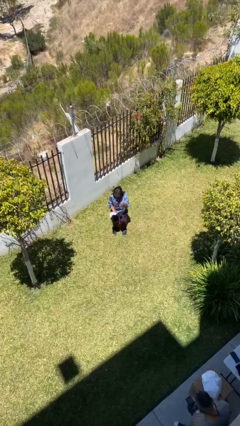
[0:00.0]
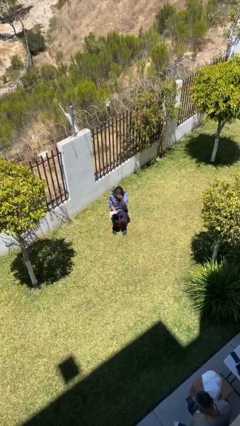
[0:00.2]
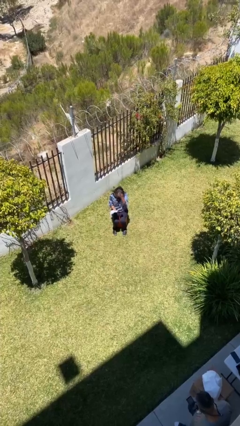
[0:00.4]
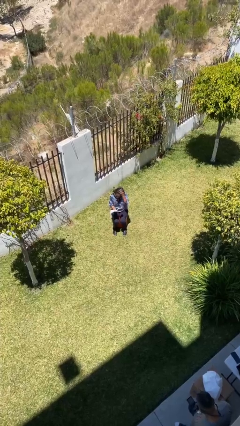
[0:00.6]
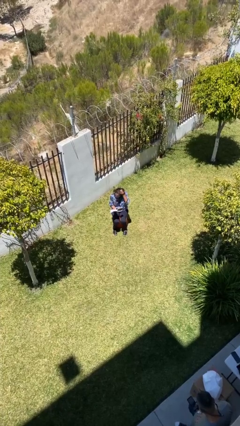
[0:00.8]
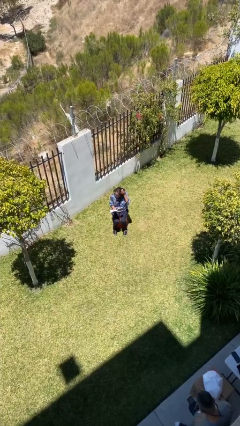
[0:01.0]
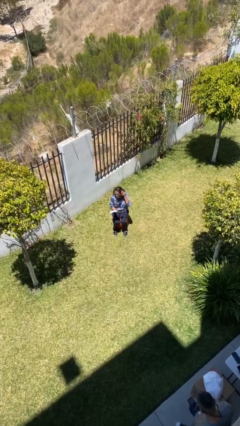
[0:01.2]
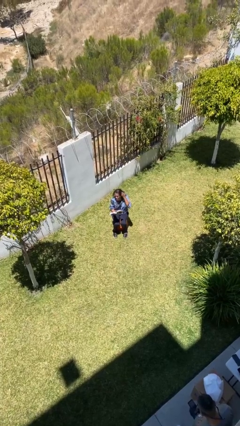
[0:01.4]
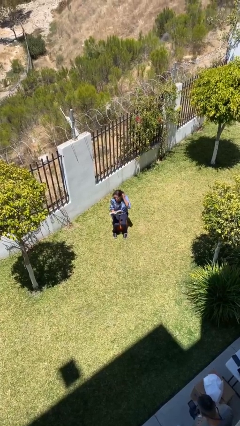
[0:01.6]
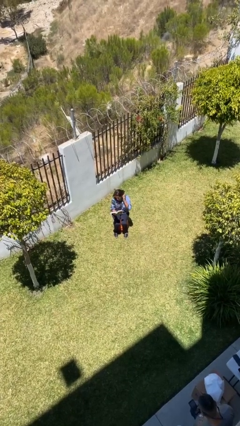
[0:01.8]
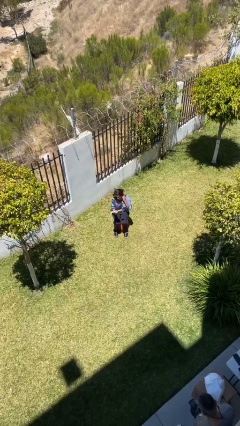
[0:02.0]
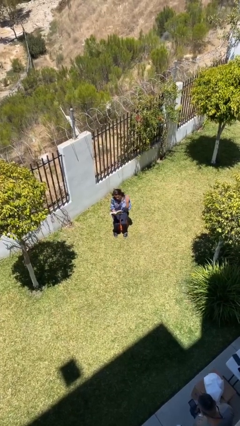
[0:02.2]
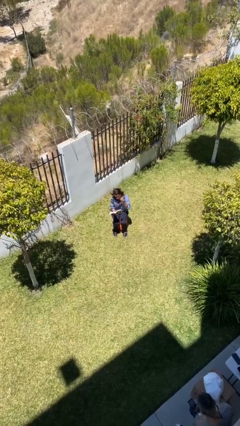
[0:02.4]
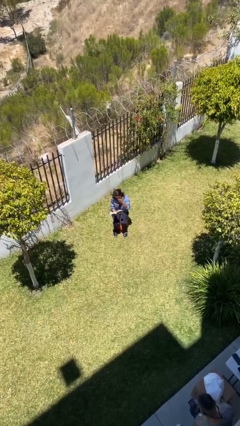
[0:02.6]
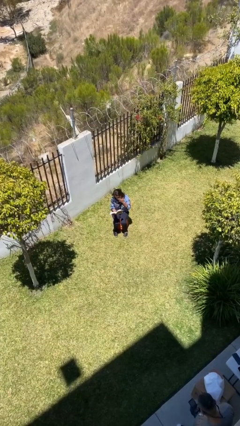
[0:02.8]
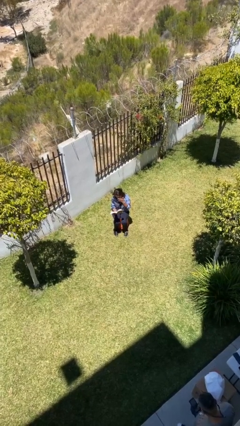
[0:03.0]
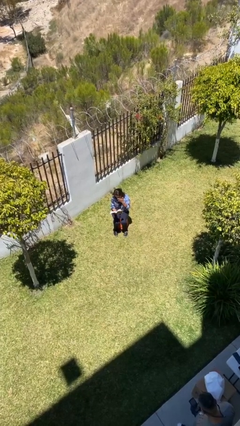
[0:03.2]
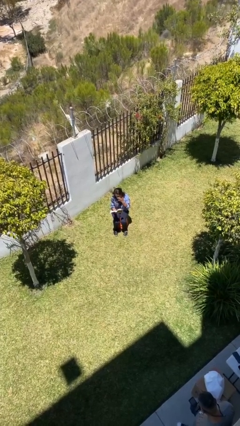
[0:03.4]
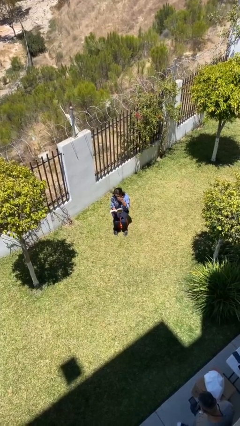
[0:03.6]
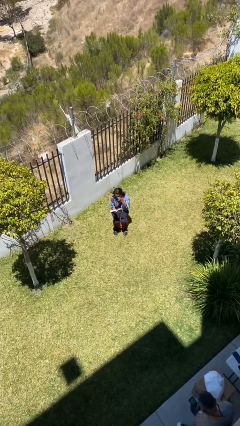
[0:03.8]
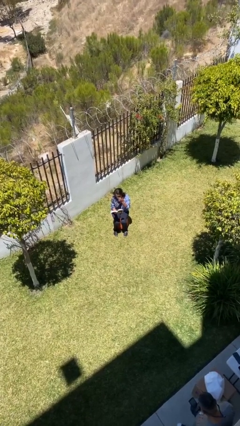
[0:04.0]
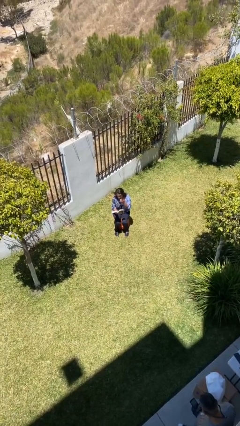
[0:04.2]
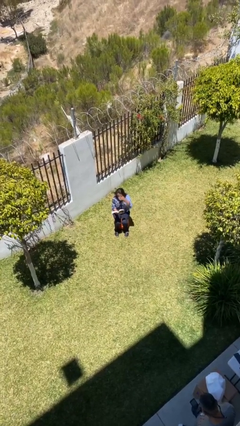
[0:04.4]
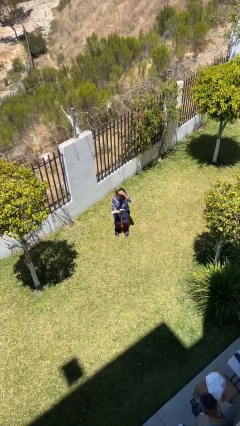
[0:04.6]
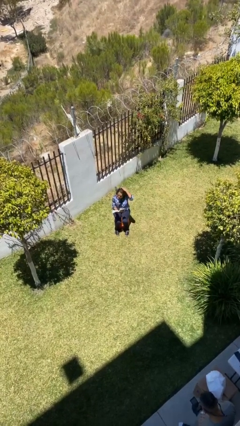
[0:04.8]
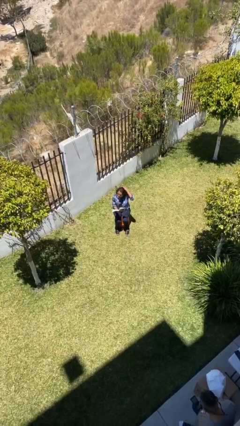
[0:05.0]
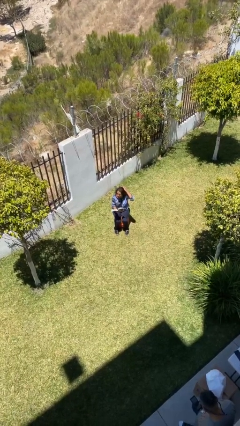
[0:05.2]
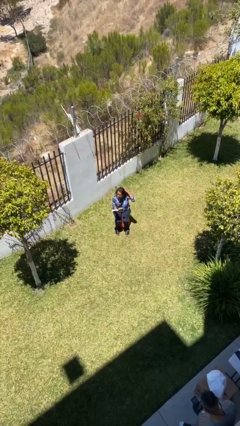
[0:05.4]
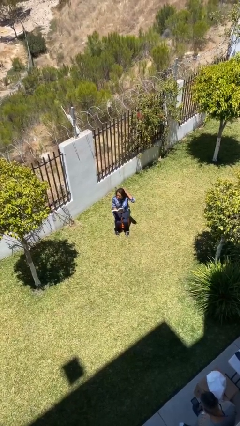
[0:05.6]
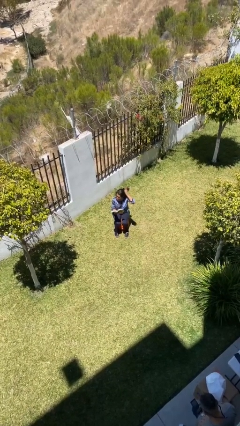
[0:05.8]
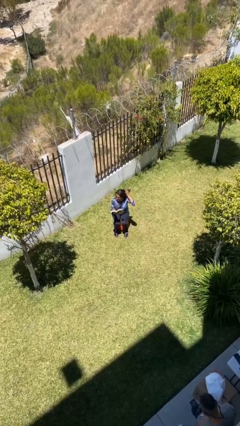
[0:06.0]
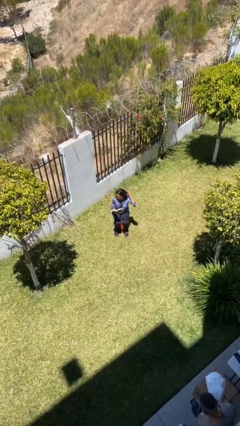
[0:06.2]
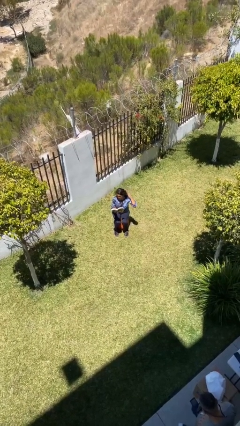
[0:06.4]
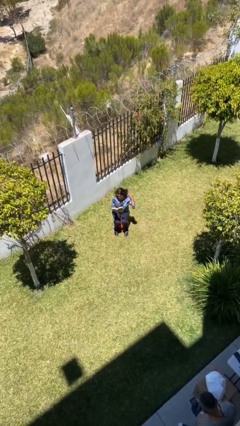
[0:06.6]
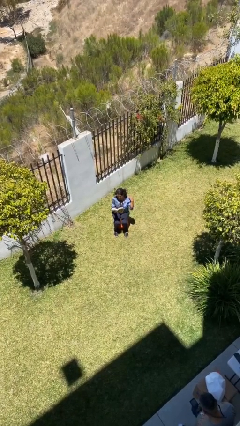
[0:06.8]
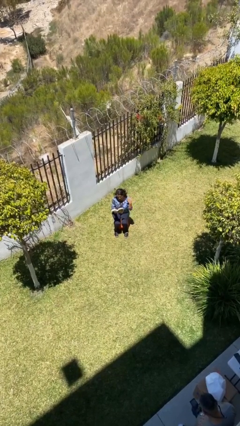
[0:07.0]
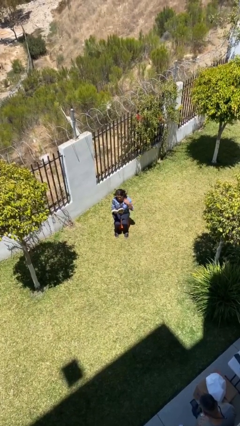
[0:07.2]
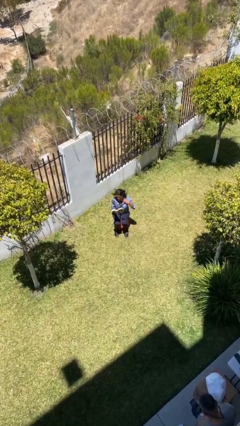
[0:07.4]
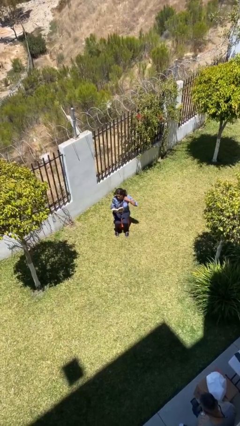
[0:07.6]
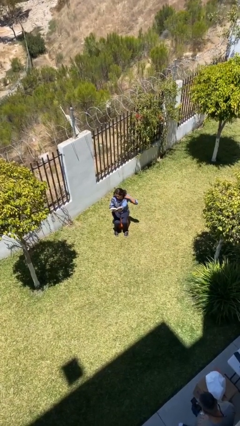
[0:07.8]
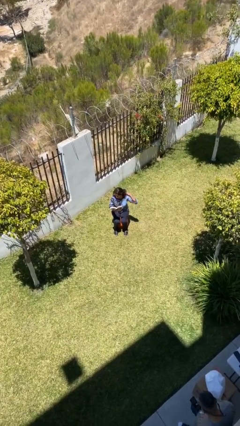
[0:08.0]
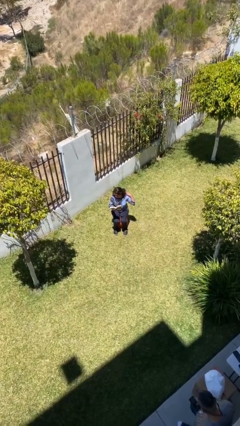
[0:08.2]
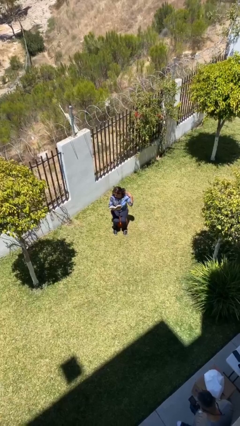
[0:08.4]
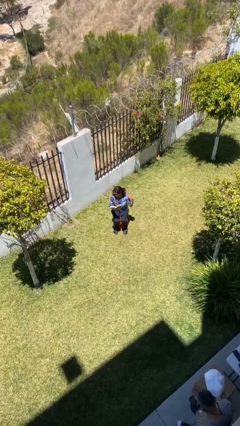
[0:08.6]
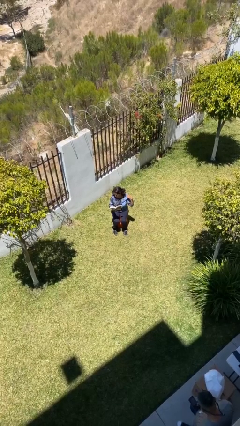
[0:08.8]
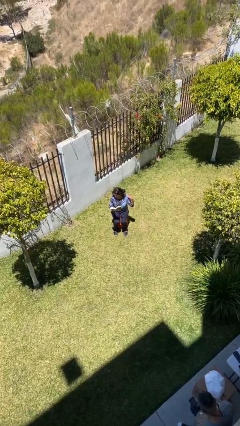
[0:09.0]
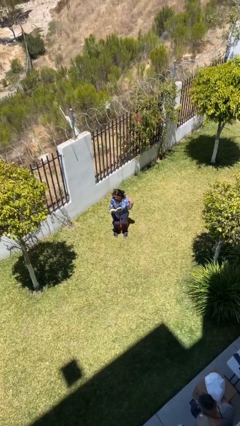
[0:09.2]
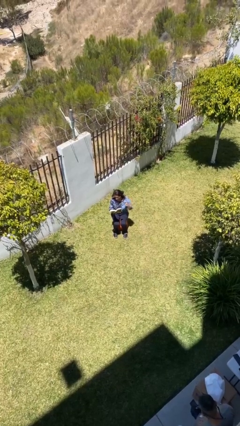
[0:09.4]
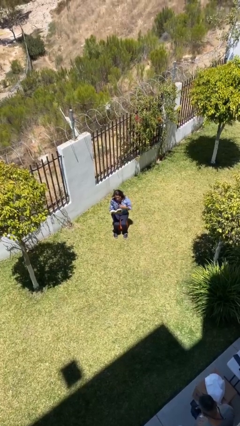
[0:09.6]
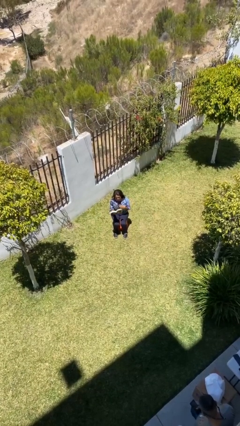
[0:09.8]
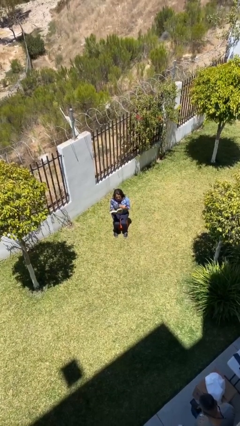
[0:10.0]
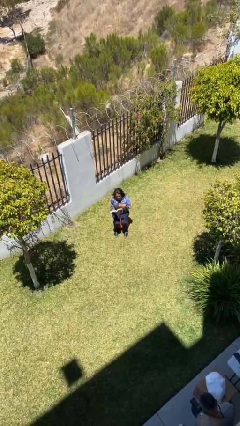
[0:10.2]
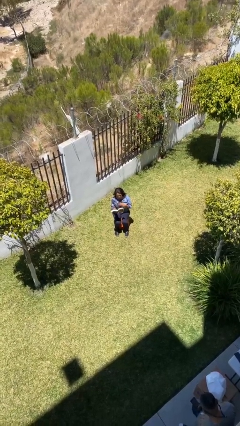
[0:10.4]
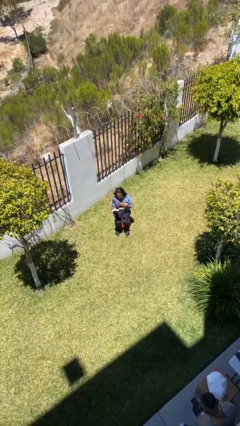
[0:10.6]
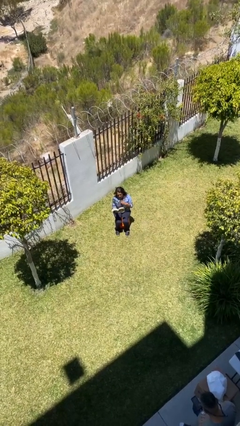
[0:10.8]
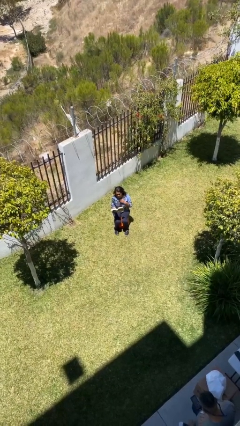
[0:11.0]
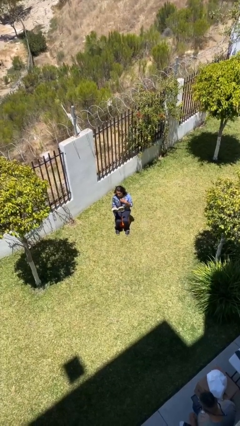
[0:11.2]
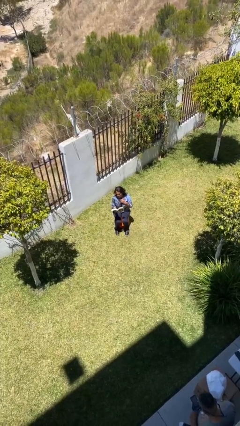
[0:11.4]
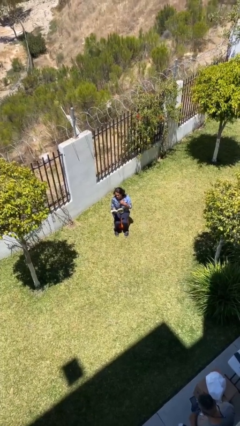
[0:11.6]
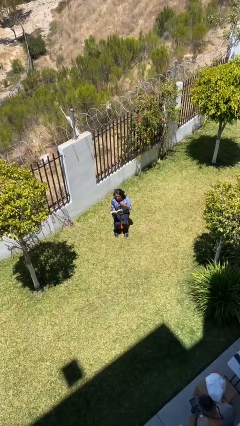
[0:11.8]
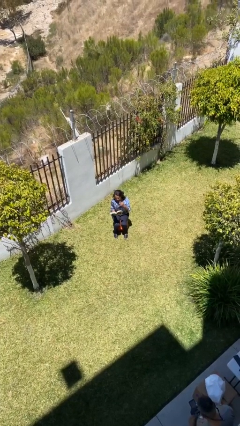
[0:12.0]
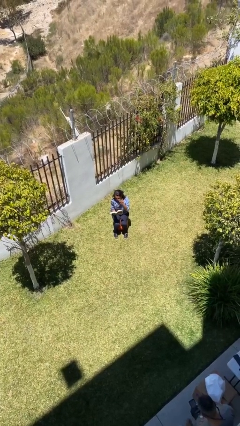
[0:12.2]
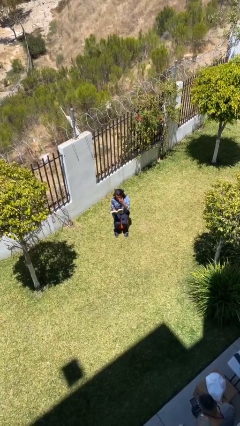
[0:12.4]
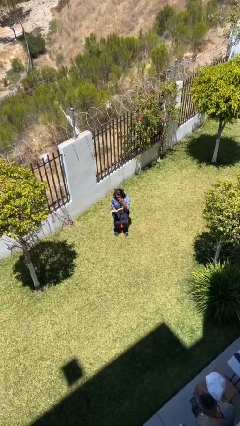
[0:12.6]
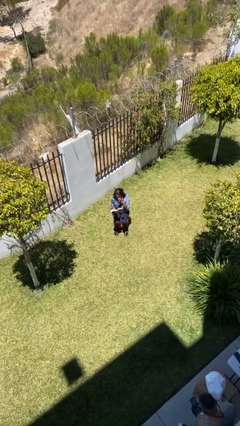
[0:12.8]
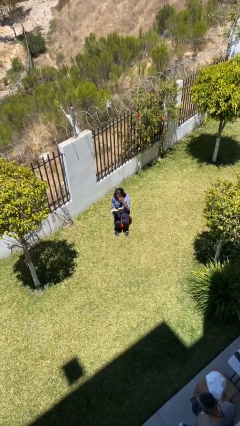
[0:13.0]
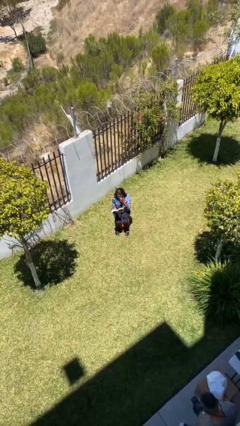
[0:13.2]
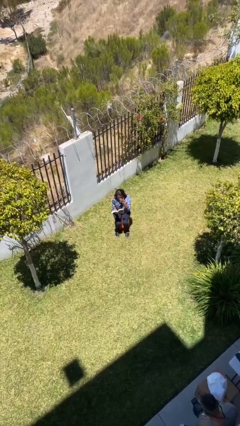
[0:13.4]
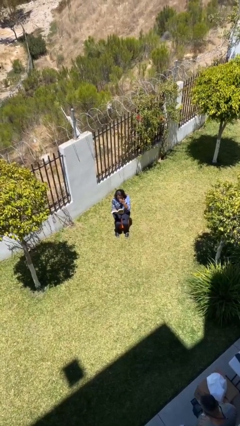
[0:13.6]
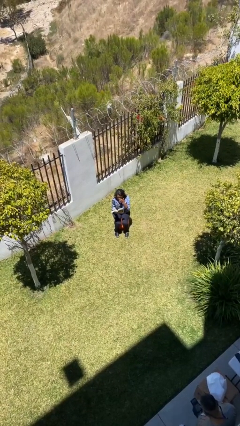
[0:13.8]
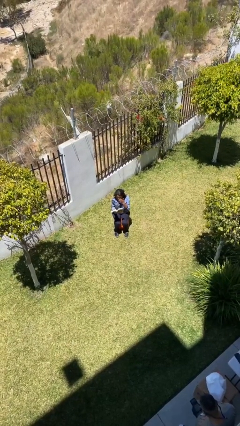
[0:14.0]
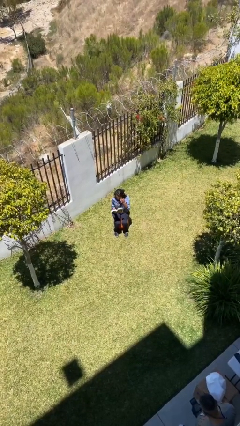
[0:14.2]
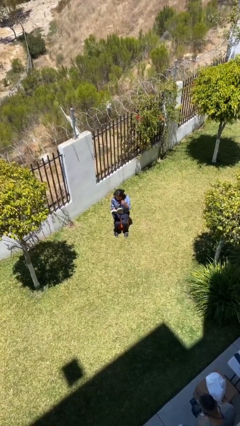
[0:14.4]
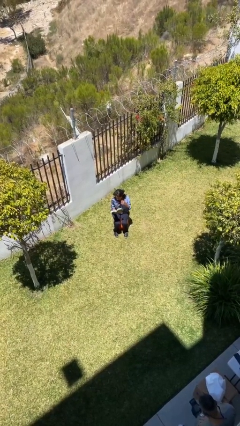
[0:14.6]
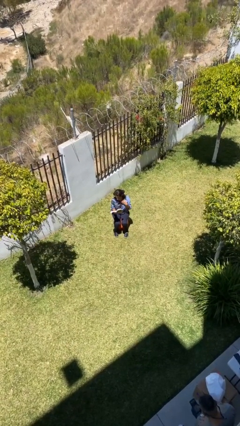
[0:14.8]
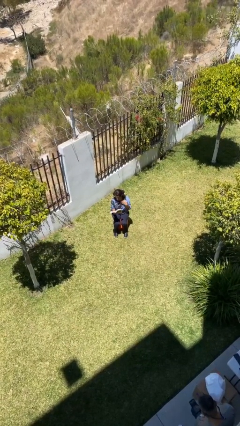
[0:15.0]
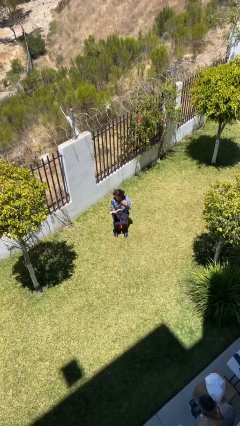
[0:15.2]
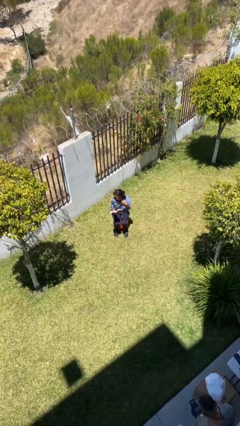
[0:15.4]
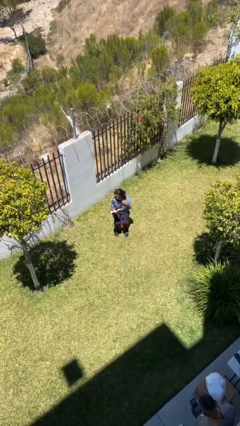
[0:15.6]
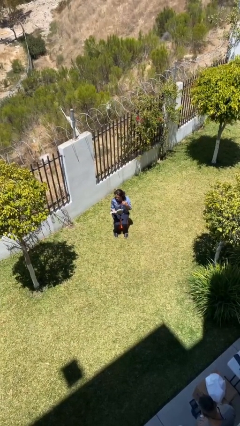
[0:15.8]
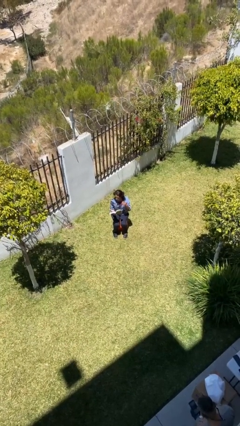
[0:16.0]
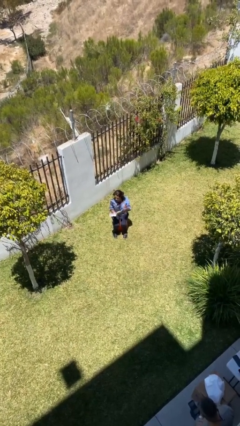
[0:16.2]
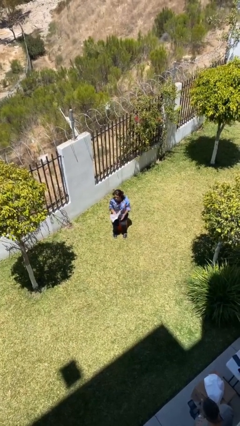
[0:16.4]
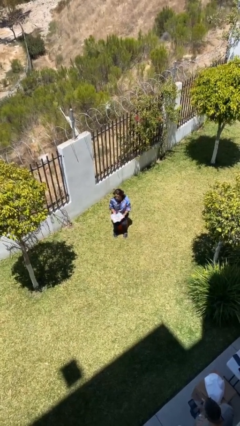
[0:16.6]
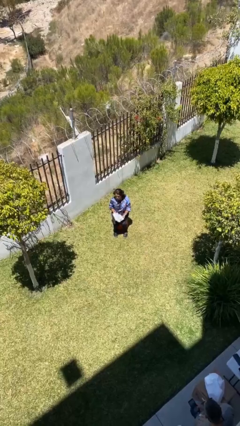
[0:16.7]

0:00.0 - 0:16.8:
person reads document

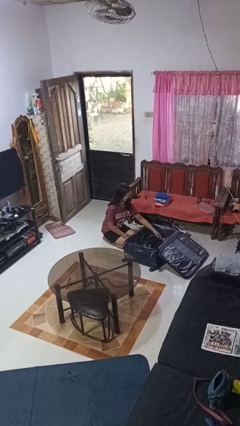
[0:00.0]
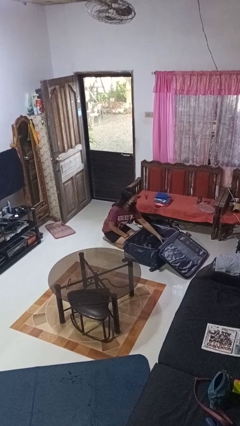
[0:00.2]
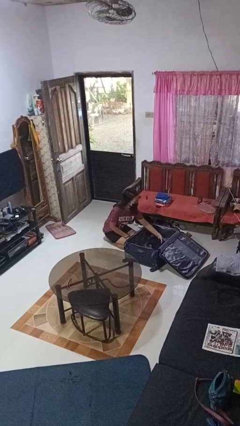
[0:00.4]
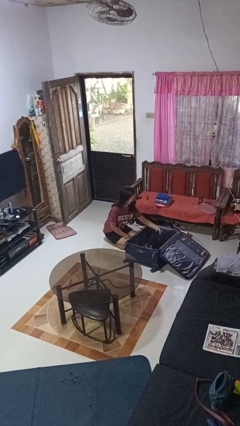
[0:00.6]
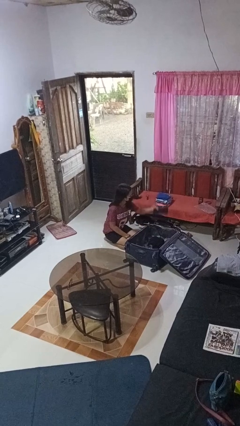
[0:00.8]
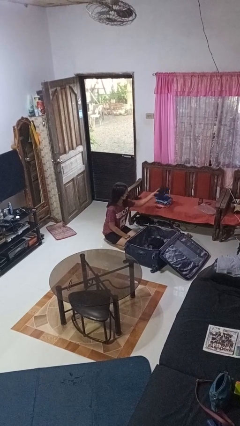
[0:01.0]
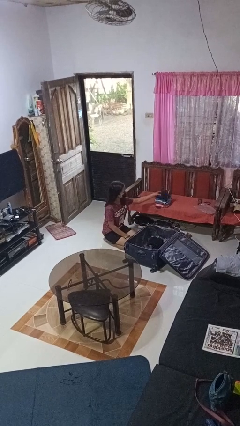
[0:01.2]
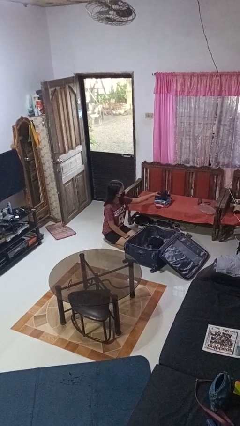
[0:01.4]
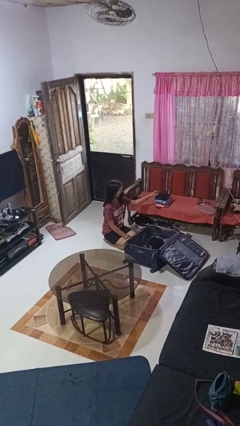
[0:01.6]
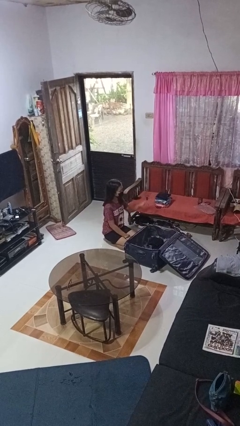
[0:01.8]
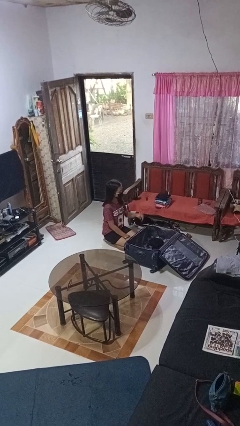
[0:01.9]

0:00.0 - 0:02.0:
person unloads clothes from suitcase
